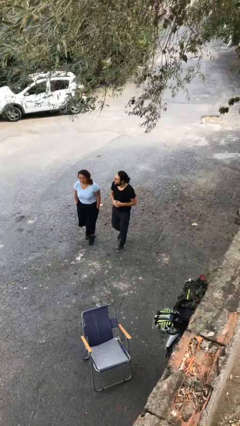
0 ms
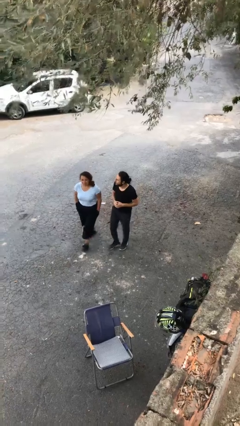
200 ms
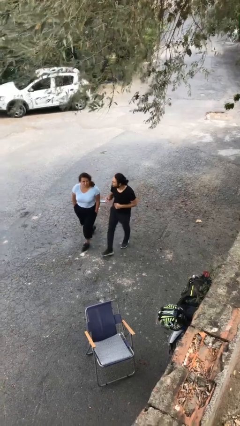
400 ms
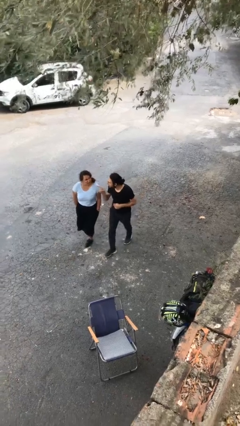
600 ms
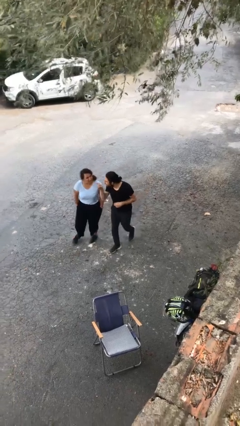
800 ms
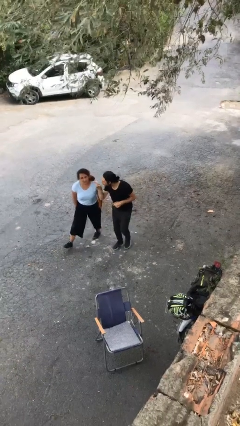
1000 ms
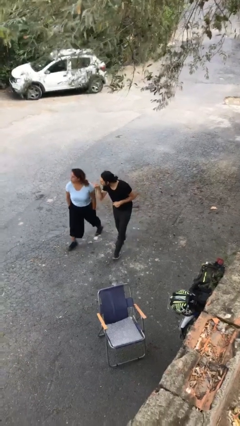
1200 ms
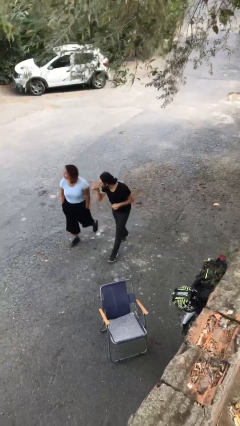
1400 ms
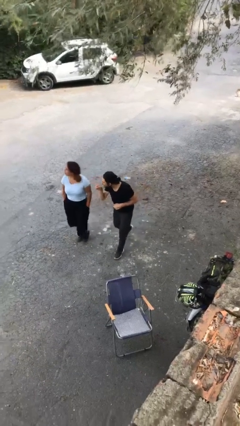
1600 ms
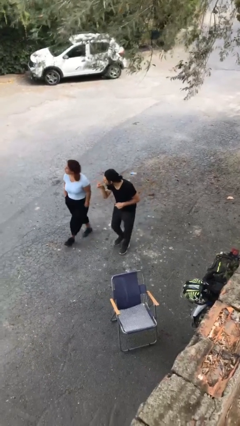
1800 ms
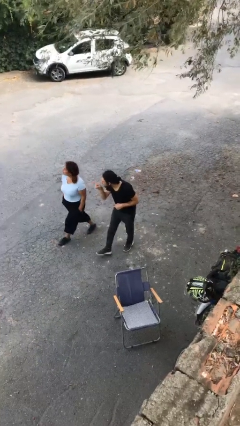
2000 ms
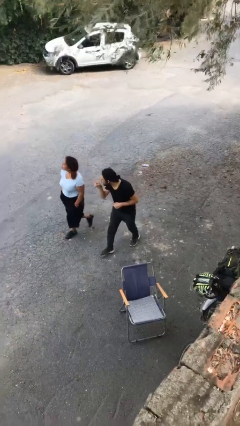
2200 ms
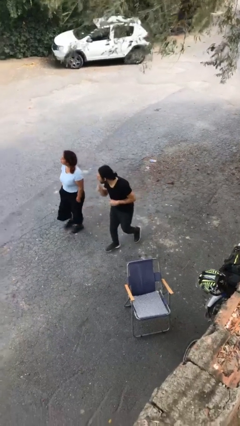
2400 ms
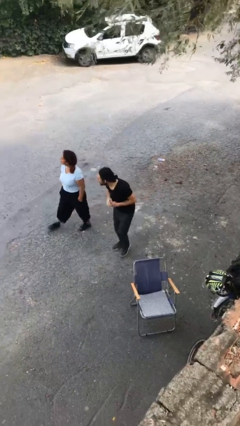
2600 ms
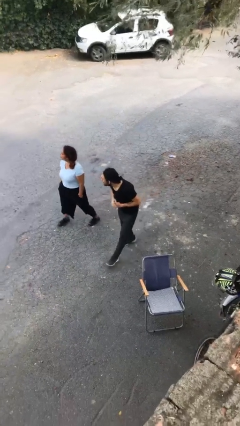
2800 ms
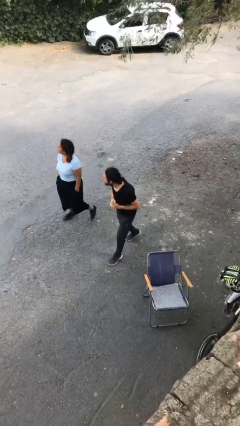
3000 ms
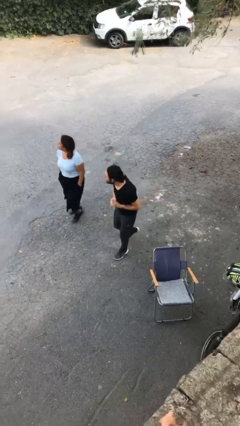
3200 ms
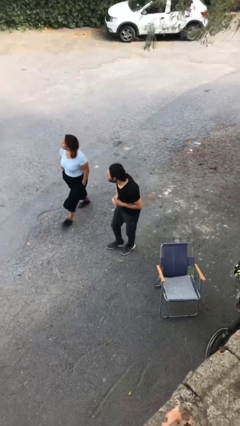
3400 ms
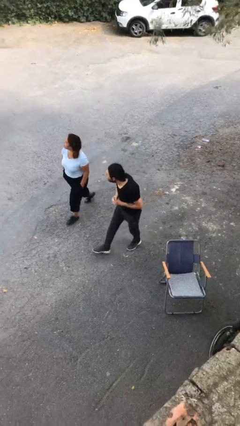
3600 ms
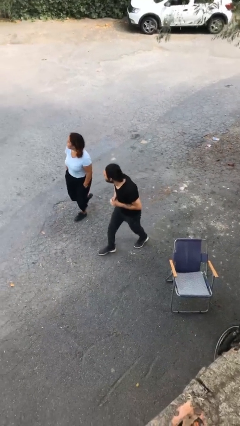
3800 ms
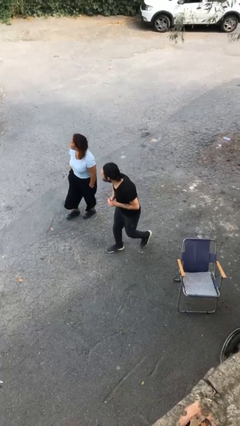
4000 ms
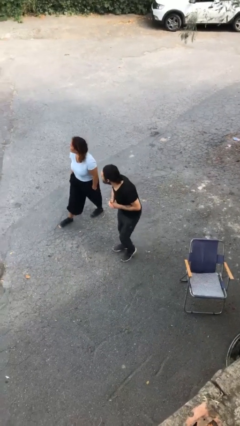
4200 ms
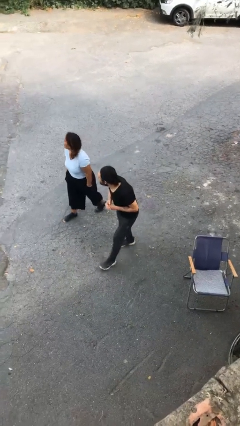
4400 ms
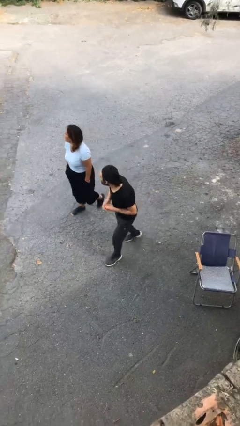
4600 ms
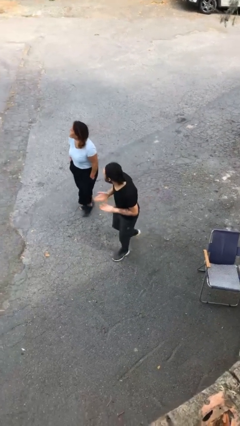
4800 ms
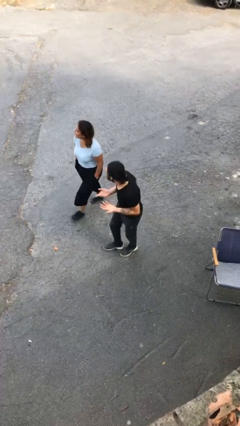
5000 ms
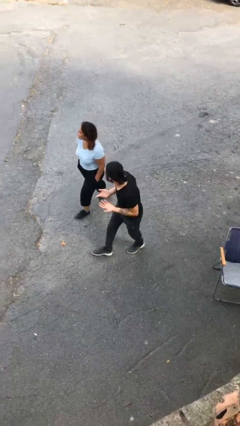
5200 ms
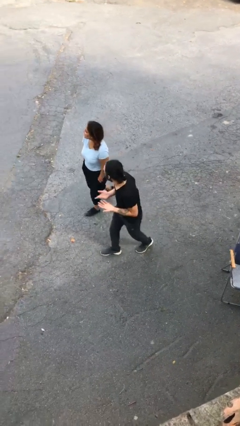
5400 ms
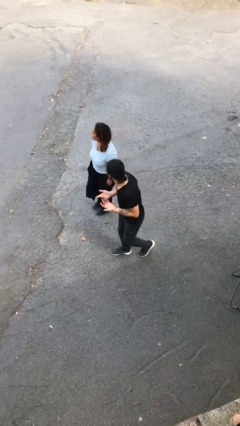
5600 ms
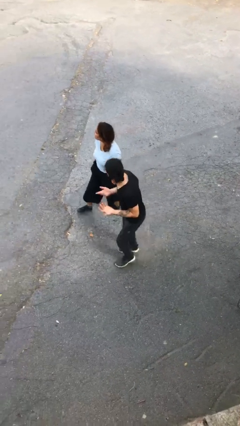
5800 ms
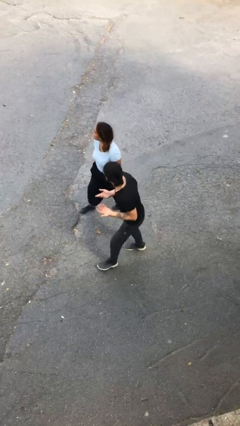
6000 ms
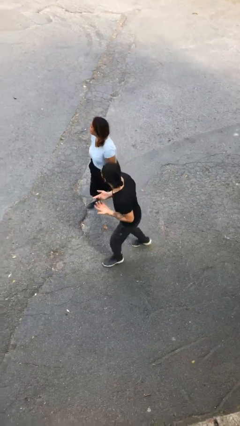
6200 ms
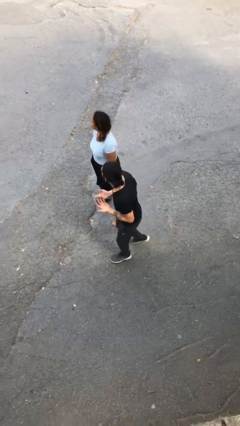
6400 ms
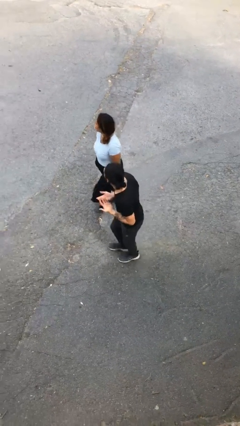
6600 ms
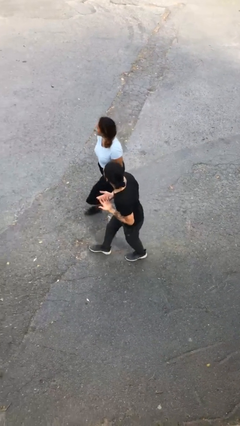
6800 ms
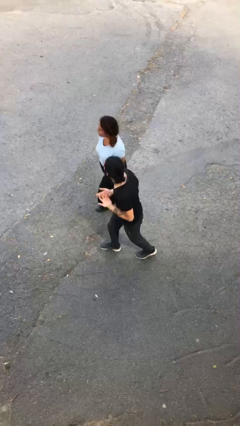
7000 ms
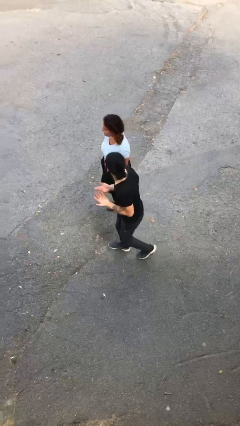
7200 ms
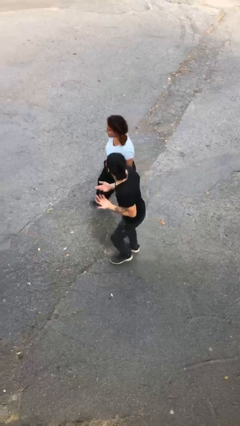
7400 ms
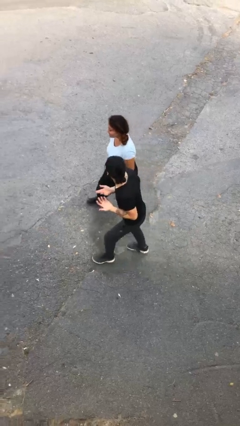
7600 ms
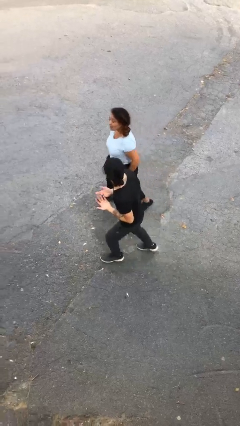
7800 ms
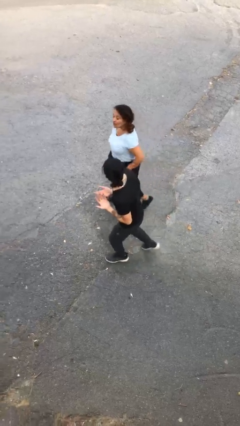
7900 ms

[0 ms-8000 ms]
person talks to person

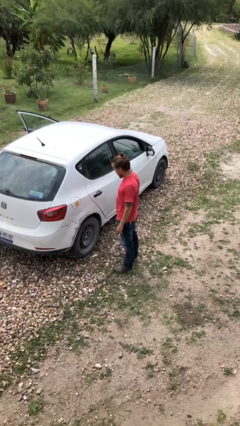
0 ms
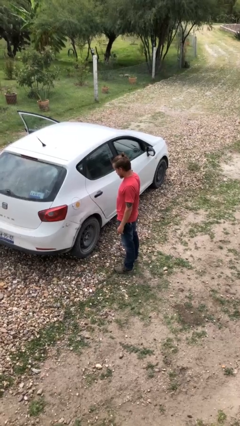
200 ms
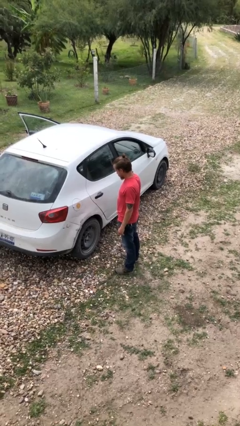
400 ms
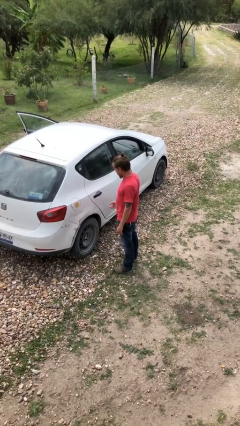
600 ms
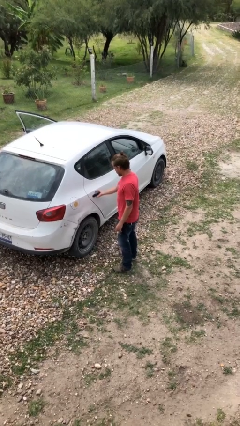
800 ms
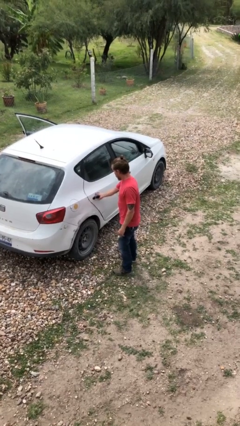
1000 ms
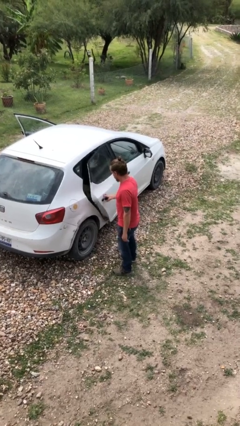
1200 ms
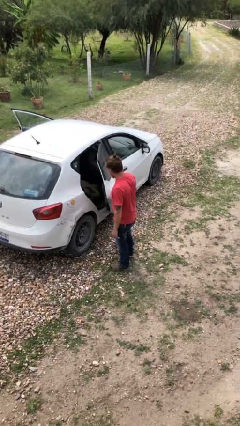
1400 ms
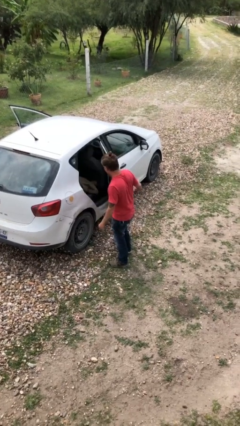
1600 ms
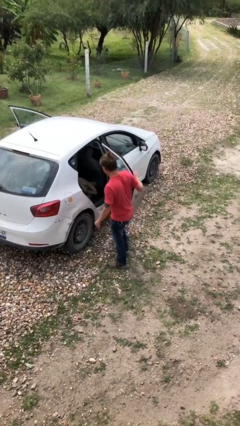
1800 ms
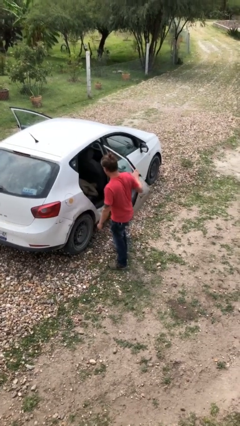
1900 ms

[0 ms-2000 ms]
person opens car door

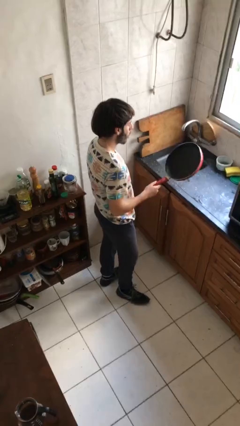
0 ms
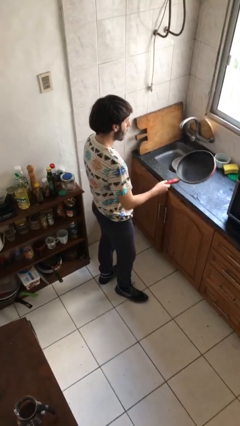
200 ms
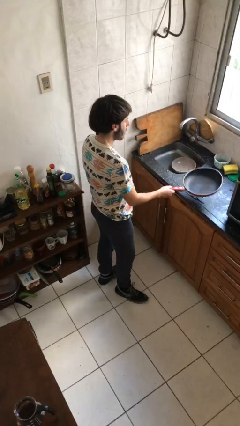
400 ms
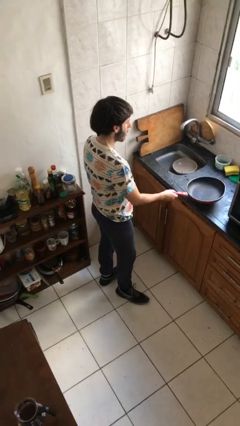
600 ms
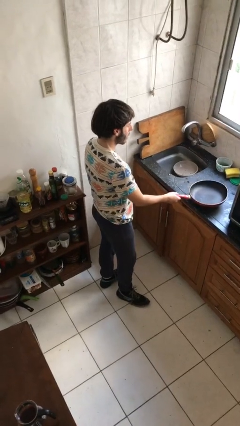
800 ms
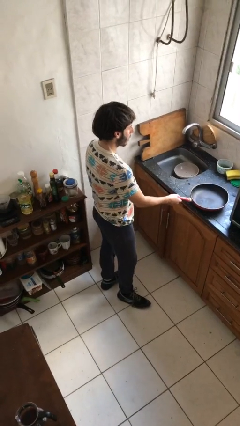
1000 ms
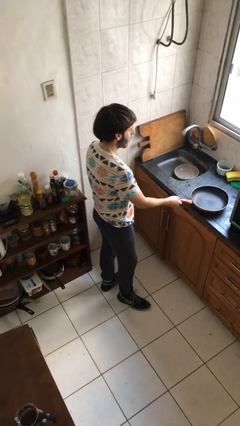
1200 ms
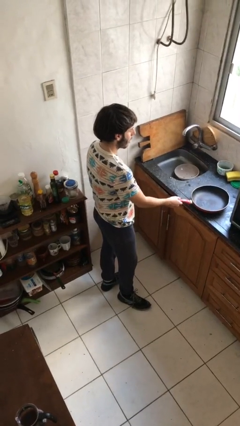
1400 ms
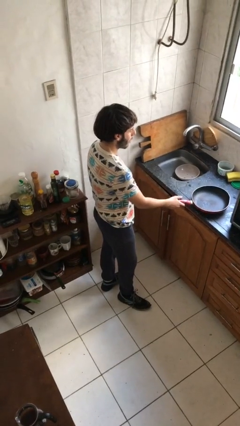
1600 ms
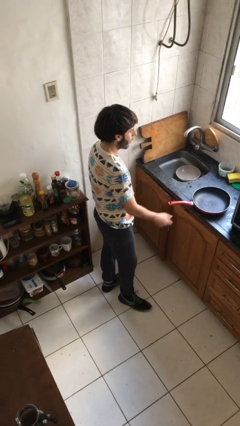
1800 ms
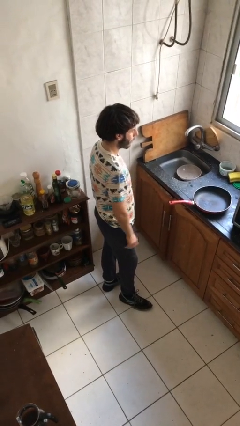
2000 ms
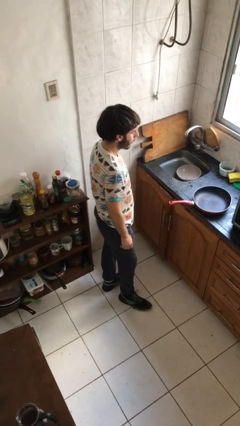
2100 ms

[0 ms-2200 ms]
person puts down object on countertop

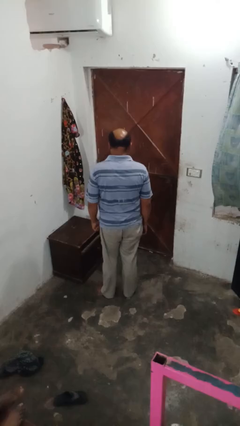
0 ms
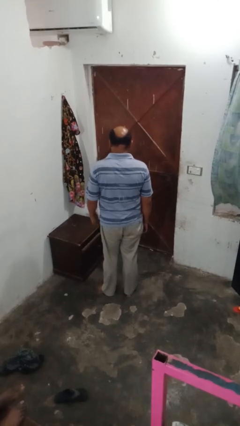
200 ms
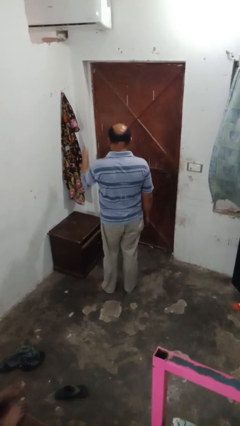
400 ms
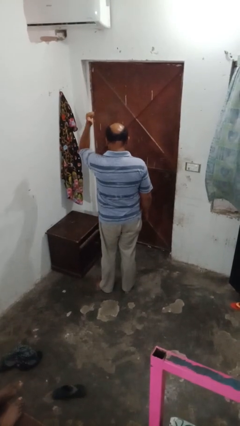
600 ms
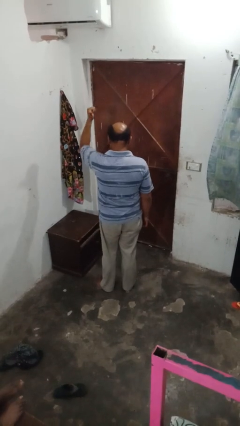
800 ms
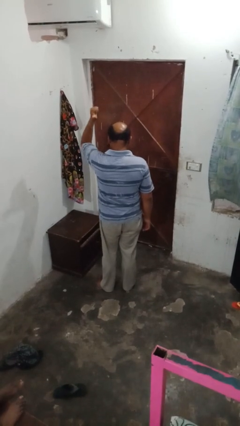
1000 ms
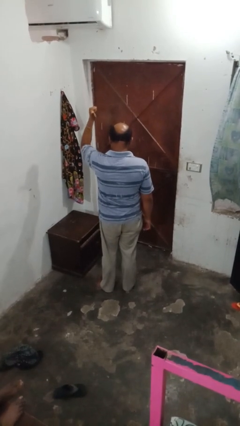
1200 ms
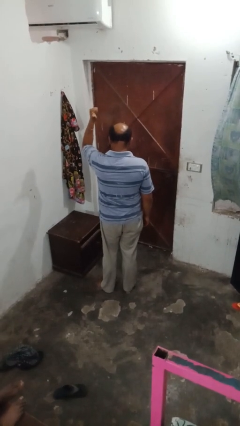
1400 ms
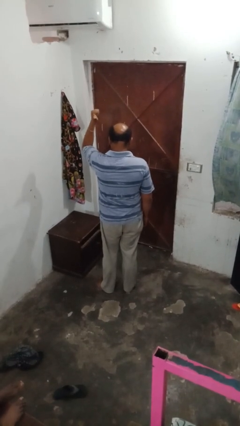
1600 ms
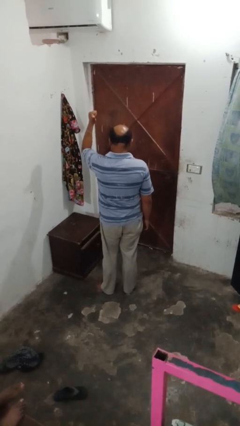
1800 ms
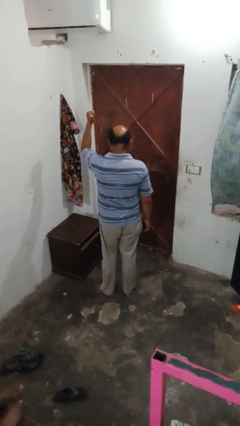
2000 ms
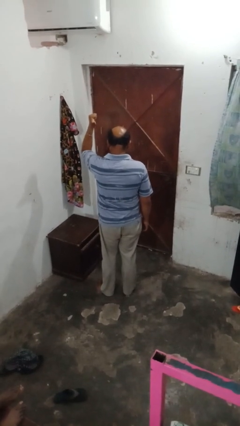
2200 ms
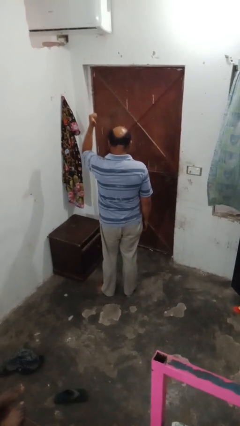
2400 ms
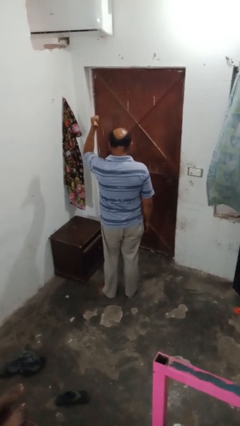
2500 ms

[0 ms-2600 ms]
person gestures behind me

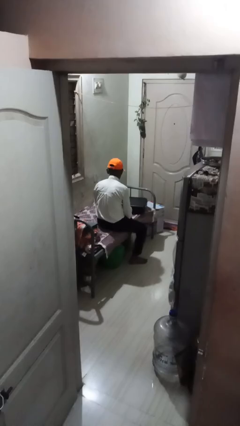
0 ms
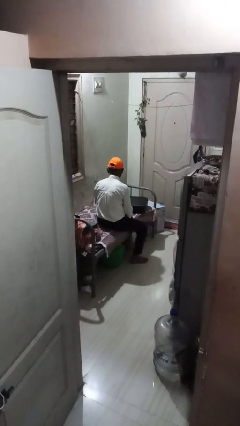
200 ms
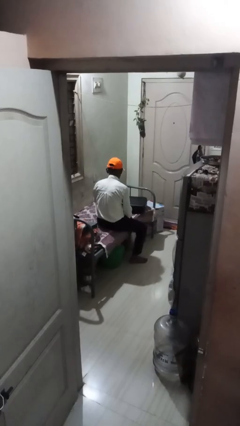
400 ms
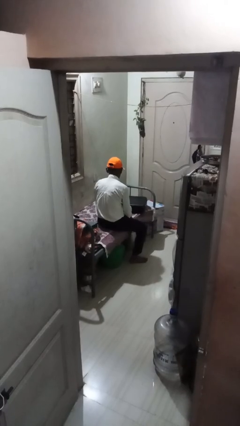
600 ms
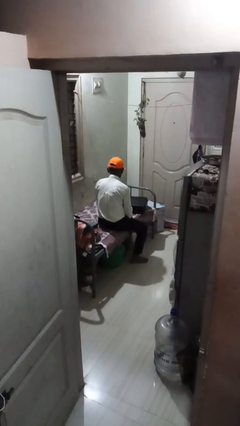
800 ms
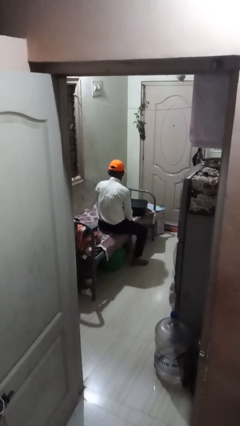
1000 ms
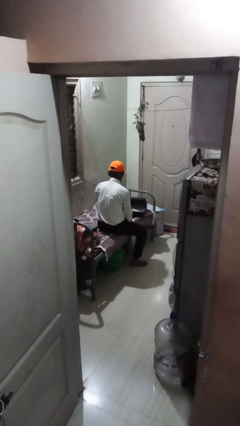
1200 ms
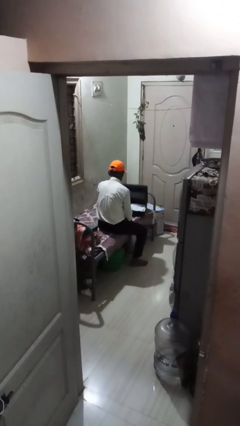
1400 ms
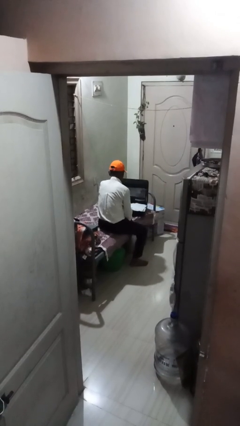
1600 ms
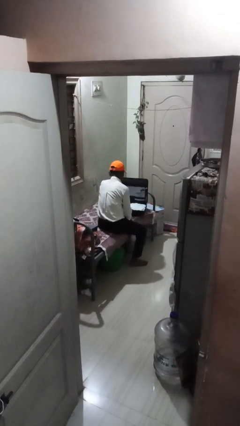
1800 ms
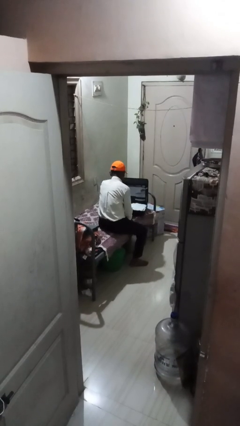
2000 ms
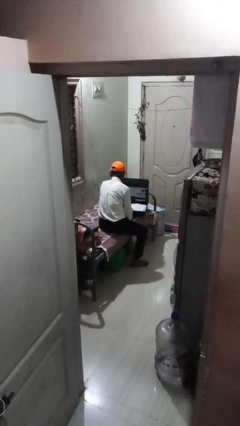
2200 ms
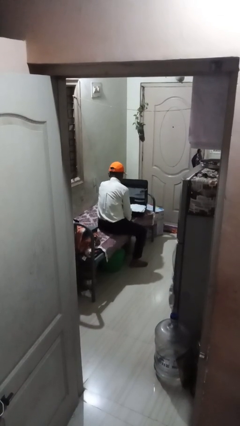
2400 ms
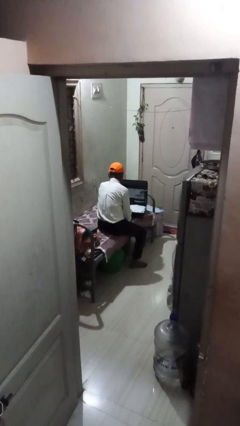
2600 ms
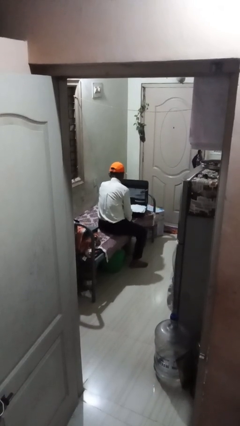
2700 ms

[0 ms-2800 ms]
person opens suitcase

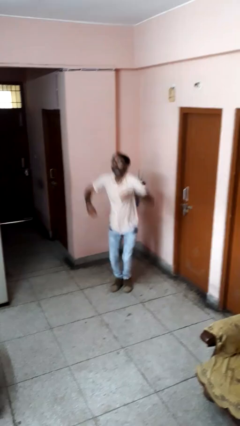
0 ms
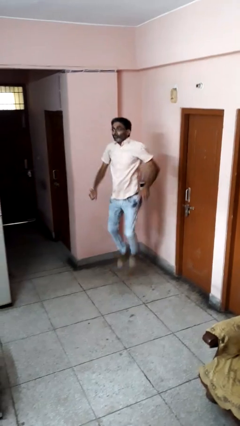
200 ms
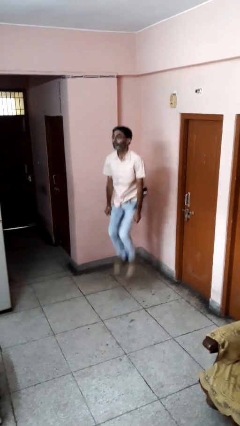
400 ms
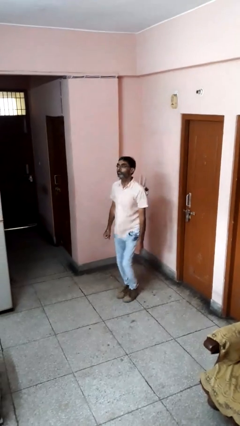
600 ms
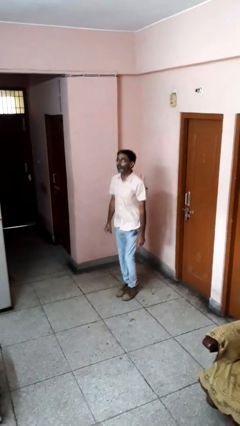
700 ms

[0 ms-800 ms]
person jumps
